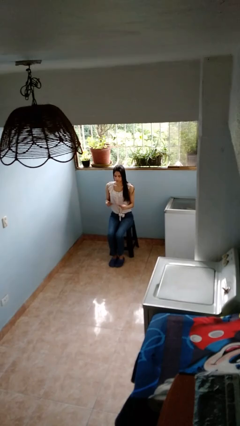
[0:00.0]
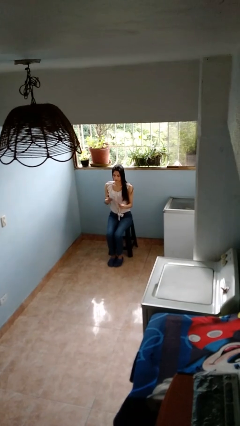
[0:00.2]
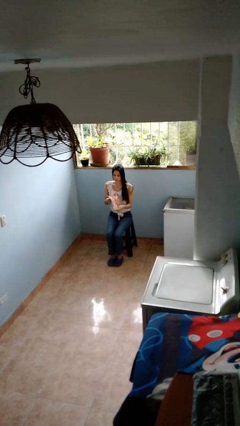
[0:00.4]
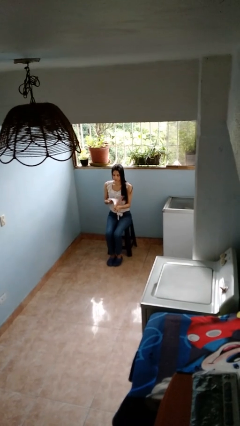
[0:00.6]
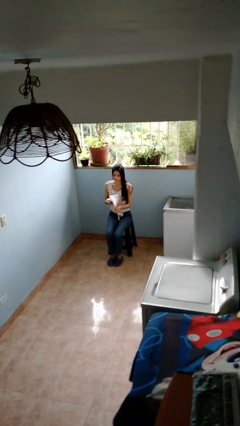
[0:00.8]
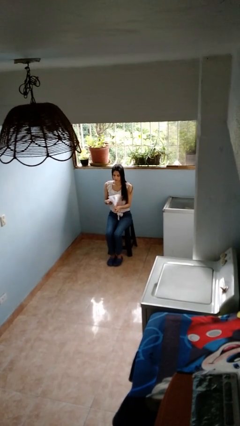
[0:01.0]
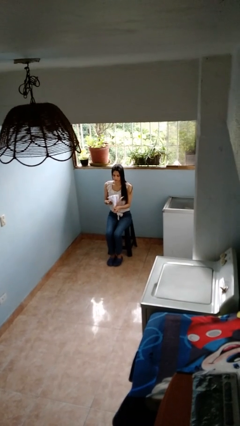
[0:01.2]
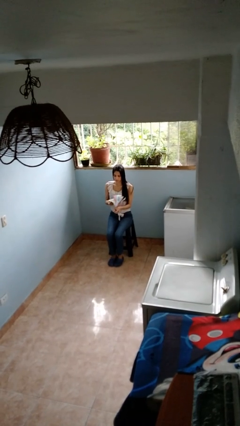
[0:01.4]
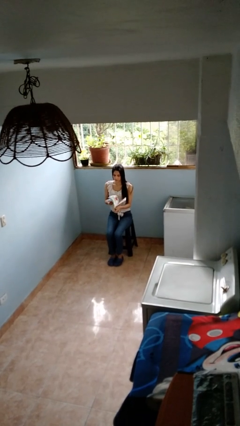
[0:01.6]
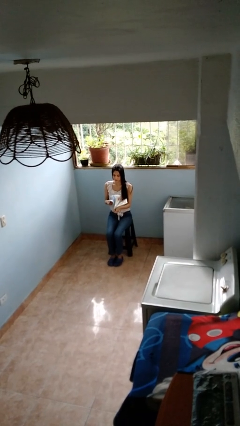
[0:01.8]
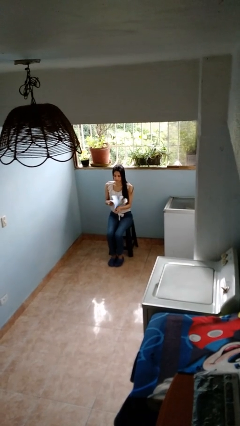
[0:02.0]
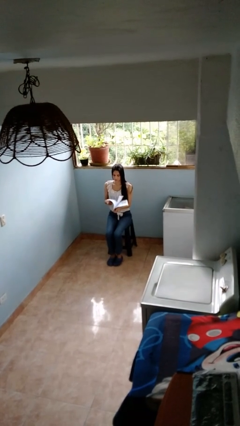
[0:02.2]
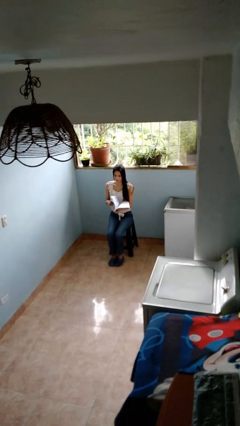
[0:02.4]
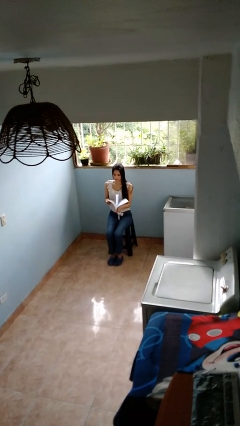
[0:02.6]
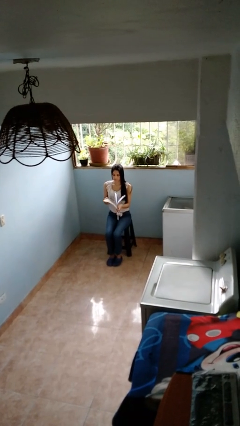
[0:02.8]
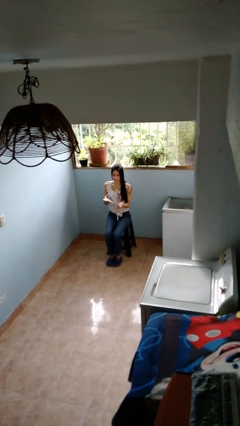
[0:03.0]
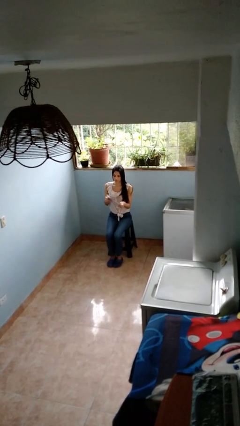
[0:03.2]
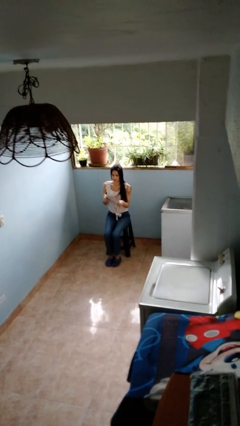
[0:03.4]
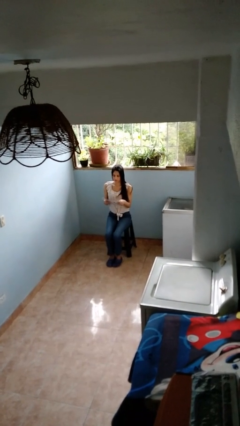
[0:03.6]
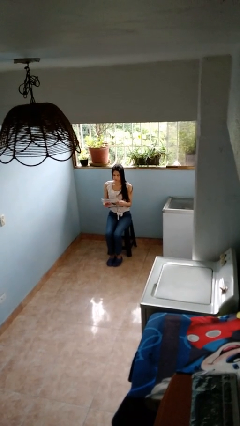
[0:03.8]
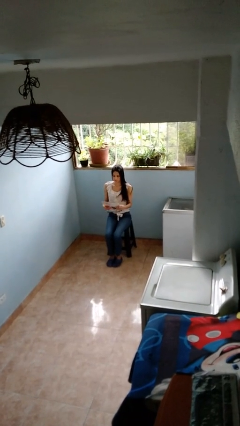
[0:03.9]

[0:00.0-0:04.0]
person reads magazine

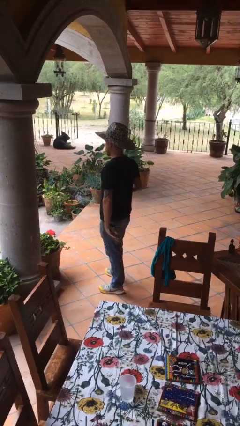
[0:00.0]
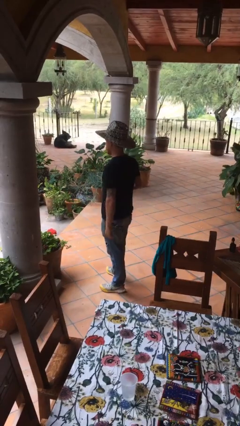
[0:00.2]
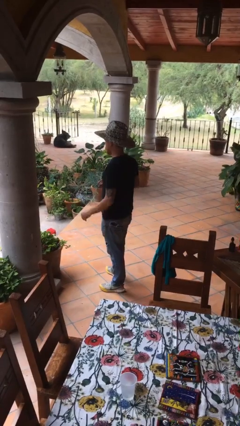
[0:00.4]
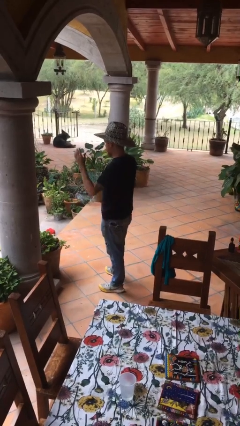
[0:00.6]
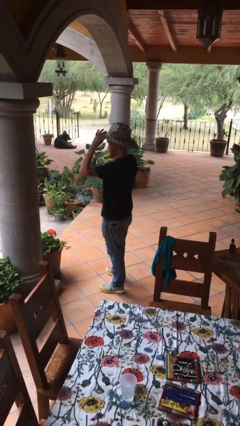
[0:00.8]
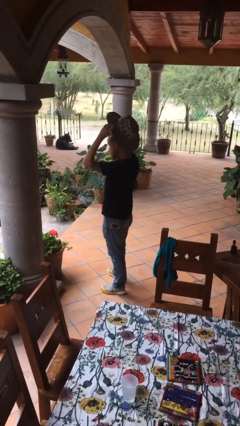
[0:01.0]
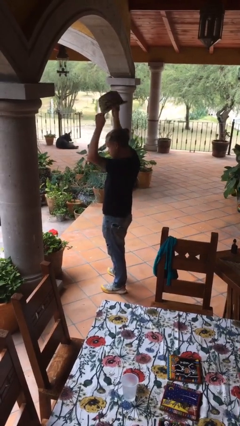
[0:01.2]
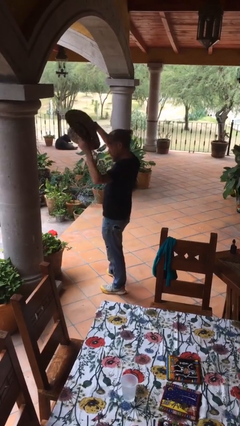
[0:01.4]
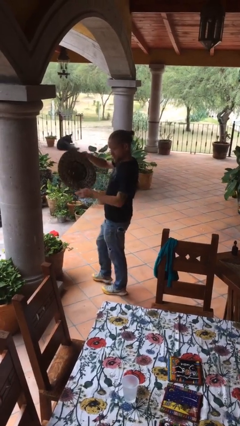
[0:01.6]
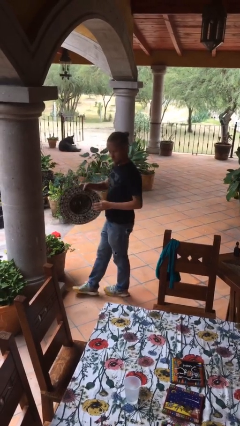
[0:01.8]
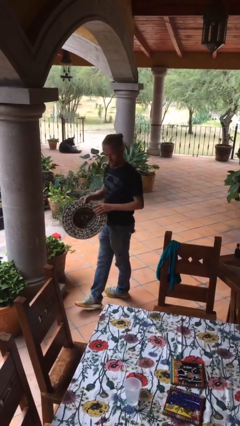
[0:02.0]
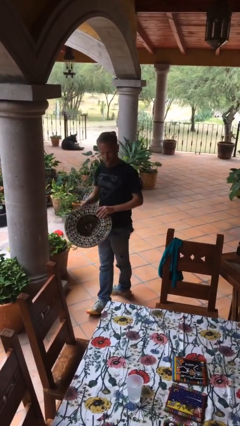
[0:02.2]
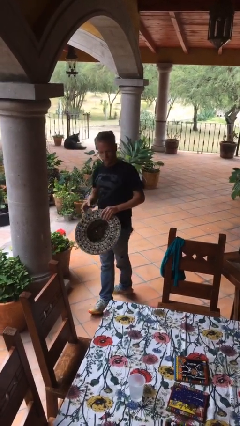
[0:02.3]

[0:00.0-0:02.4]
person takes off hat

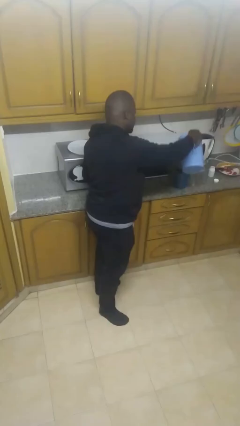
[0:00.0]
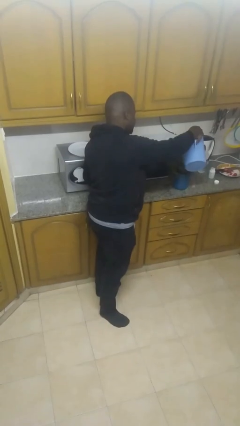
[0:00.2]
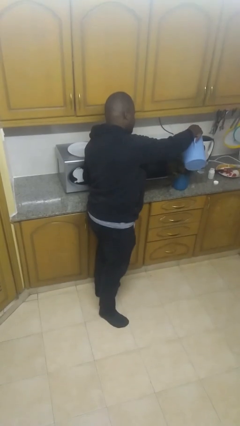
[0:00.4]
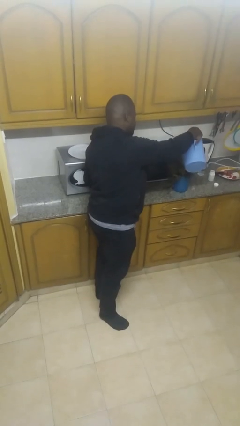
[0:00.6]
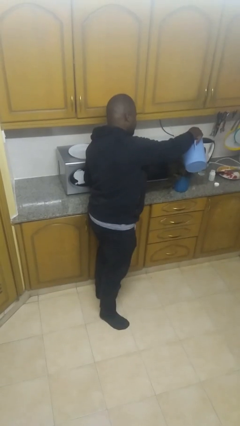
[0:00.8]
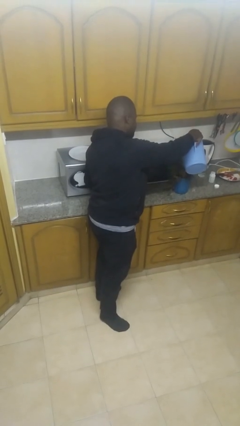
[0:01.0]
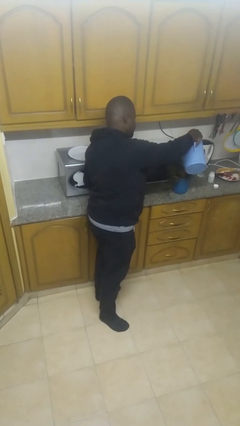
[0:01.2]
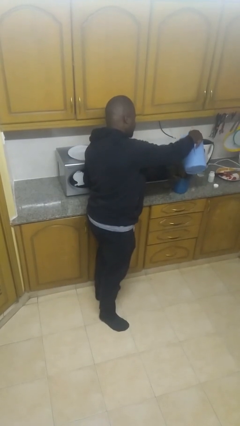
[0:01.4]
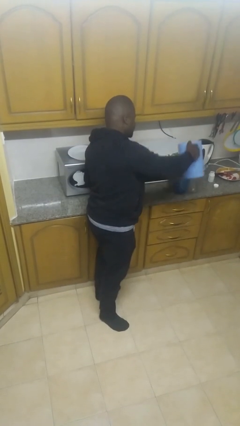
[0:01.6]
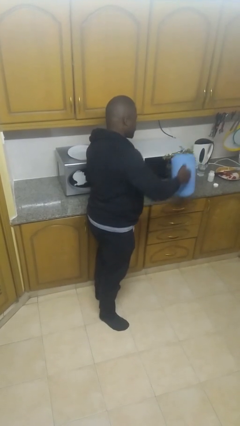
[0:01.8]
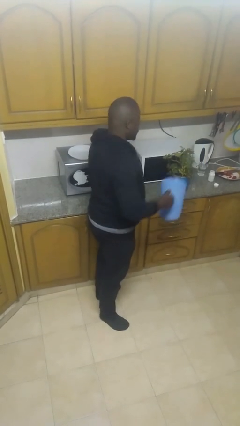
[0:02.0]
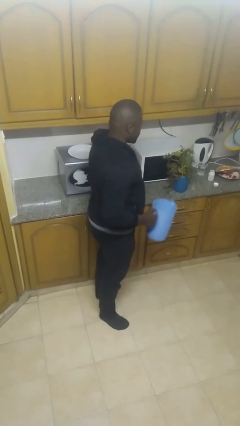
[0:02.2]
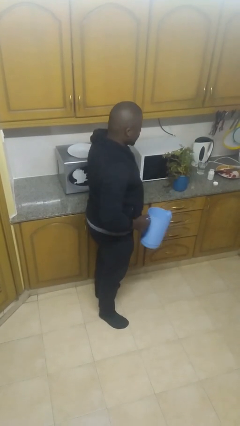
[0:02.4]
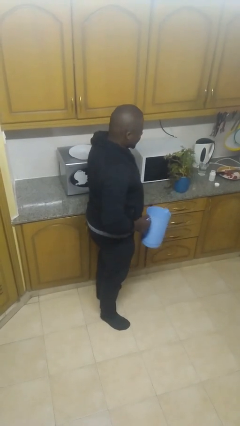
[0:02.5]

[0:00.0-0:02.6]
person waters houseplant

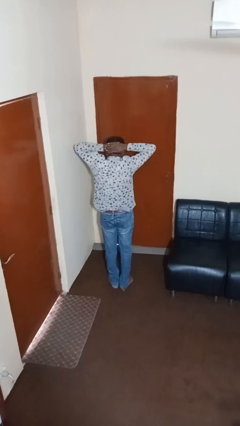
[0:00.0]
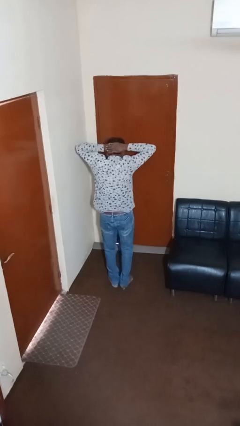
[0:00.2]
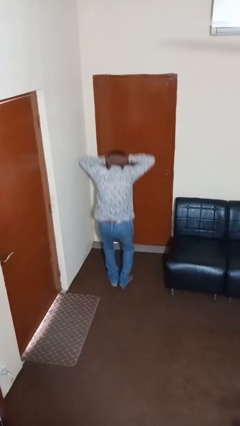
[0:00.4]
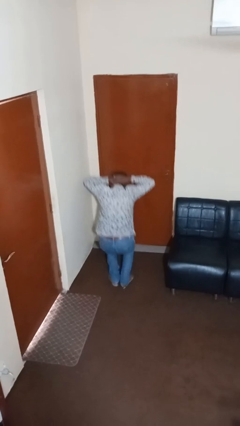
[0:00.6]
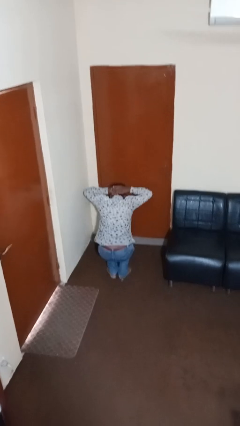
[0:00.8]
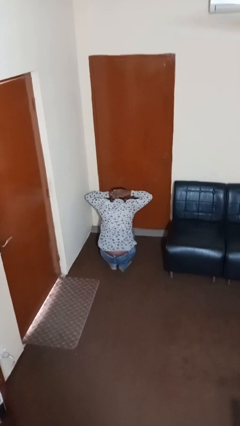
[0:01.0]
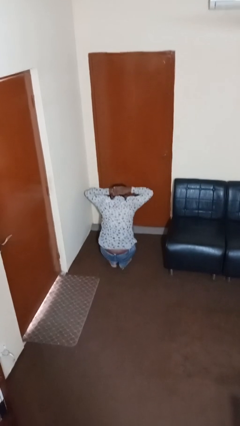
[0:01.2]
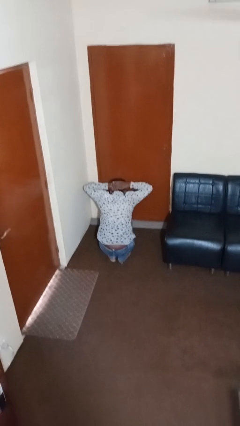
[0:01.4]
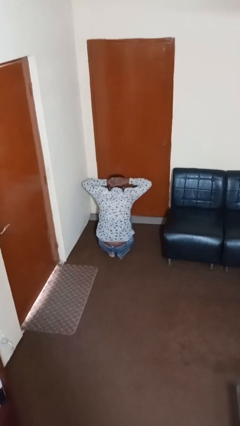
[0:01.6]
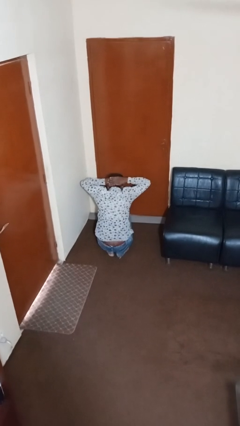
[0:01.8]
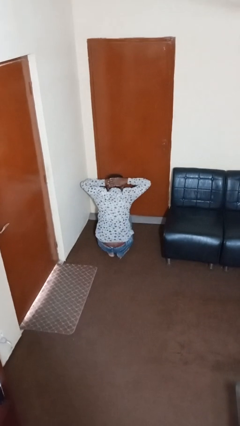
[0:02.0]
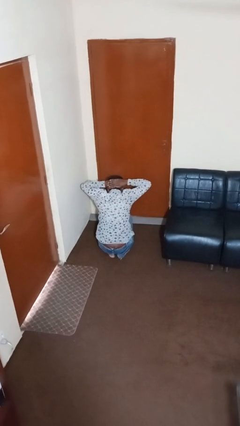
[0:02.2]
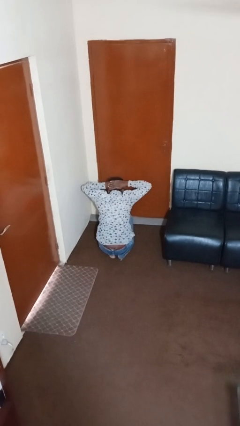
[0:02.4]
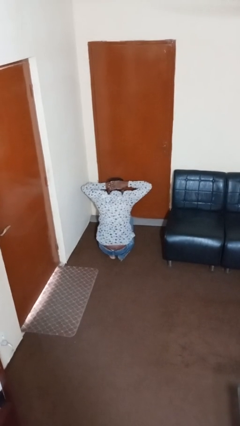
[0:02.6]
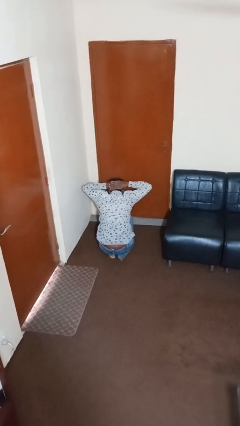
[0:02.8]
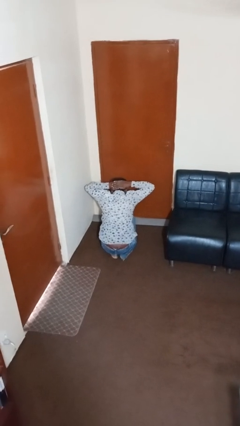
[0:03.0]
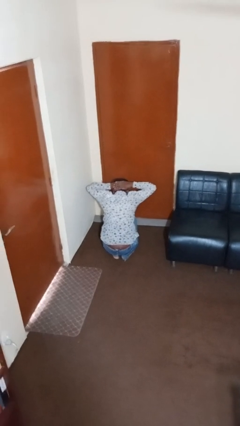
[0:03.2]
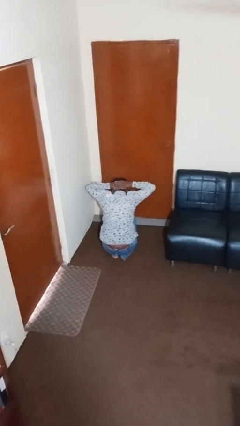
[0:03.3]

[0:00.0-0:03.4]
person exercises with situp

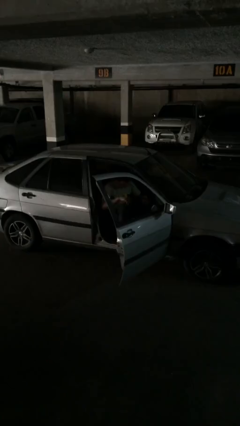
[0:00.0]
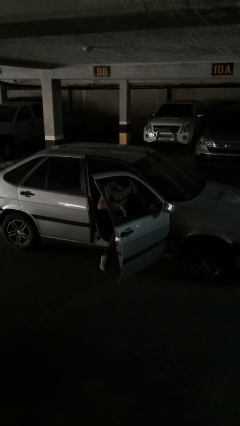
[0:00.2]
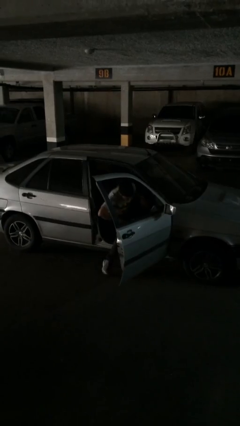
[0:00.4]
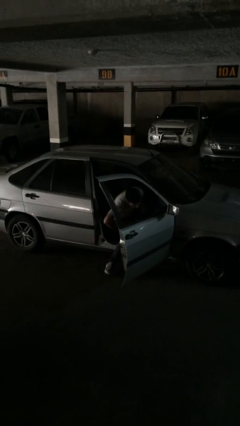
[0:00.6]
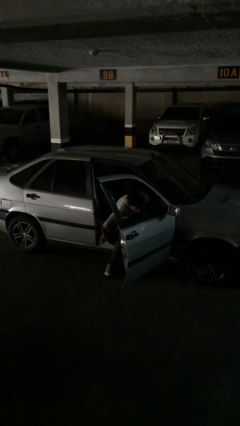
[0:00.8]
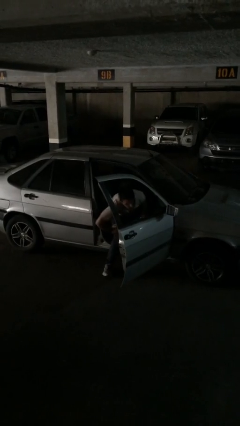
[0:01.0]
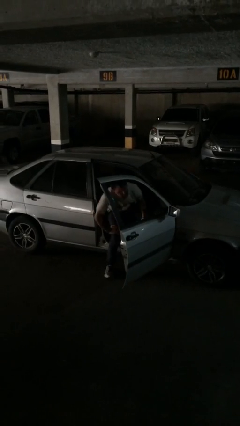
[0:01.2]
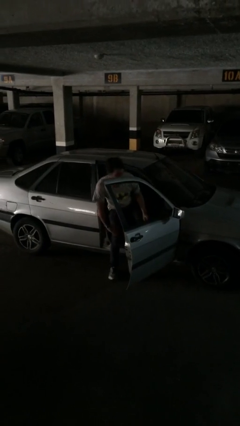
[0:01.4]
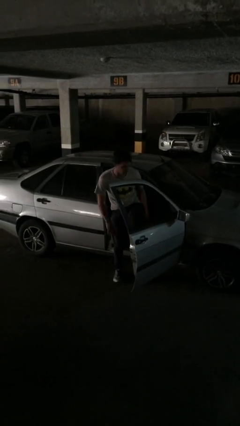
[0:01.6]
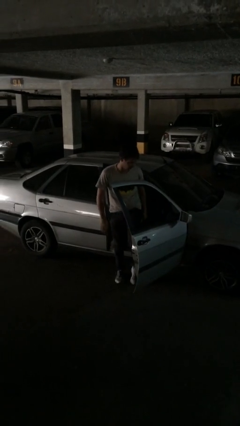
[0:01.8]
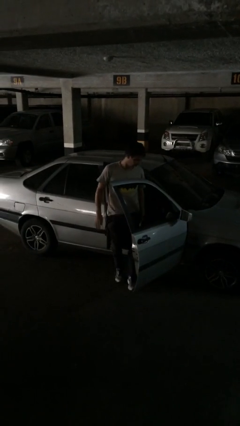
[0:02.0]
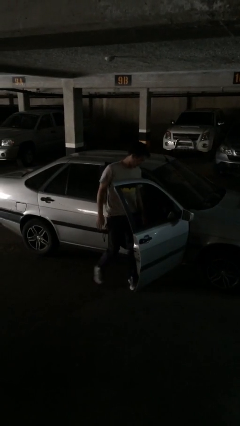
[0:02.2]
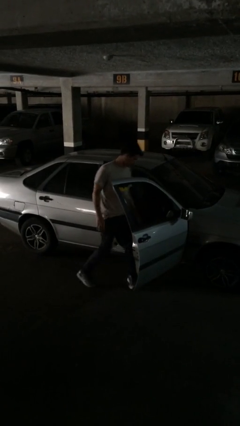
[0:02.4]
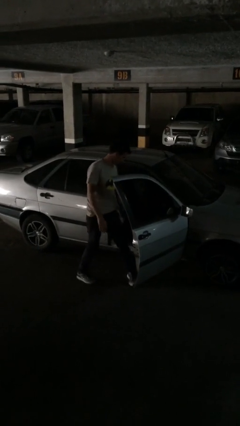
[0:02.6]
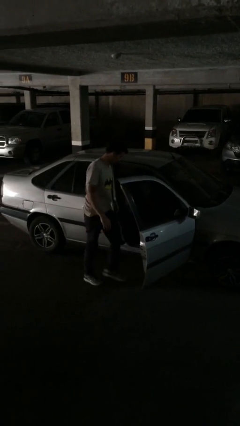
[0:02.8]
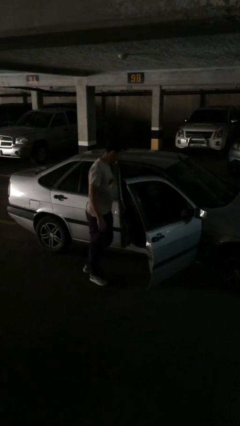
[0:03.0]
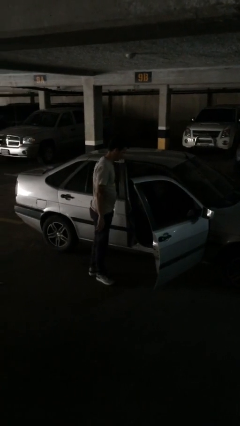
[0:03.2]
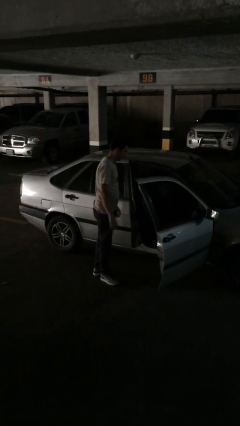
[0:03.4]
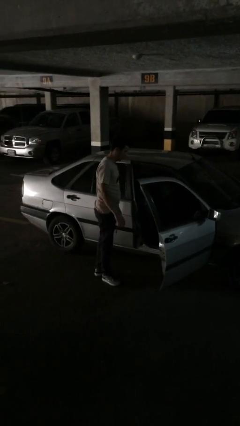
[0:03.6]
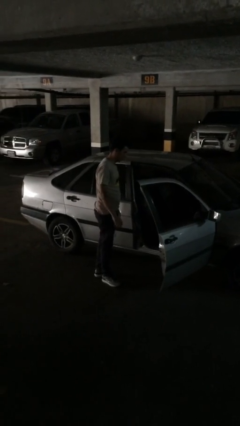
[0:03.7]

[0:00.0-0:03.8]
person exits car

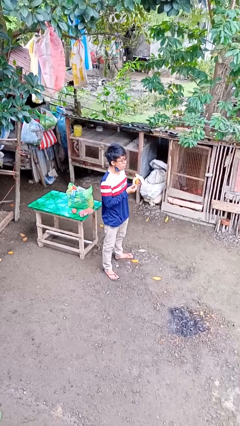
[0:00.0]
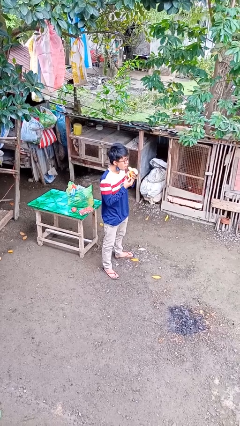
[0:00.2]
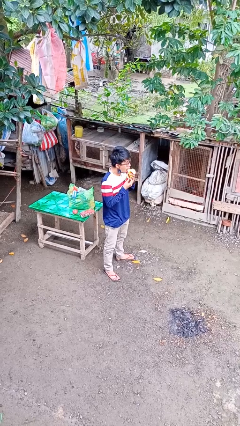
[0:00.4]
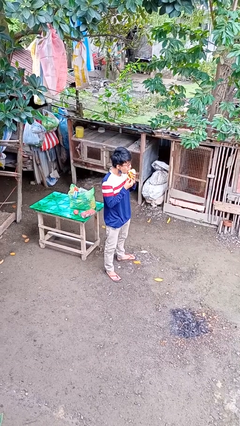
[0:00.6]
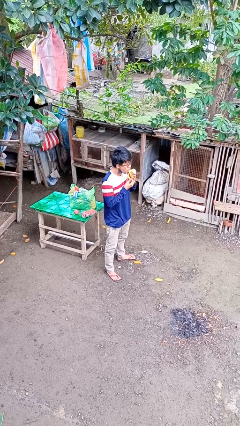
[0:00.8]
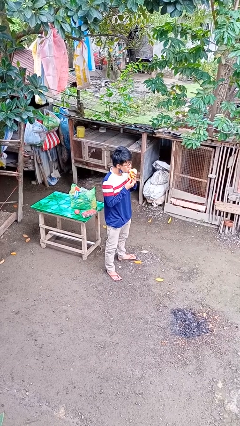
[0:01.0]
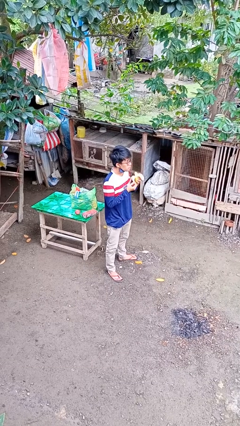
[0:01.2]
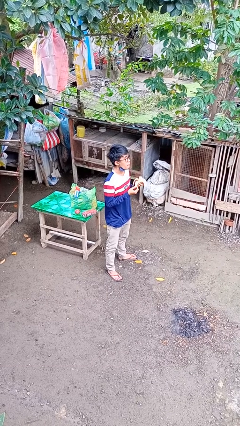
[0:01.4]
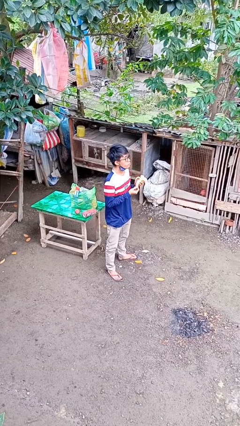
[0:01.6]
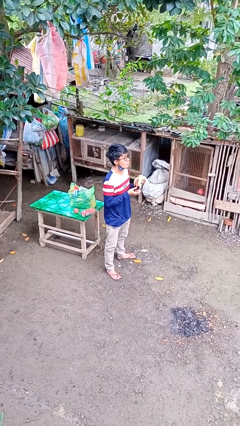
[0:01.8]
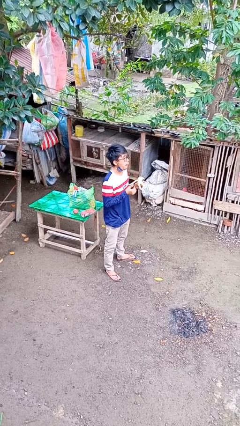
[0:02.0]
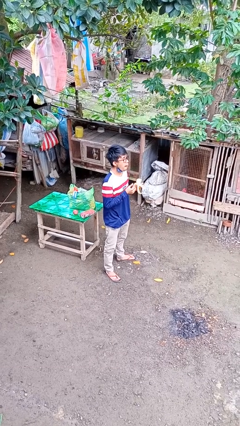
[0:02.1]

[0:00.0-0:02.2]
person eats banana
